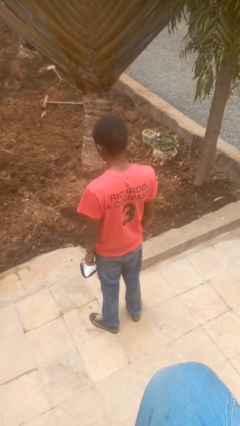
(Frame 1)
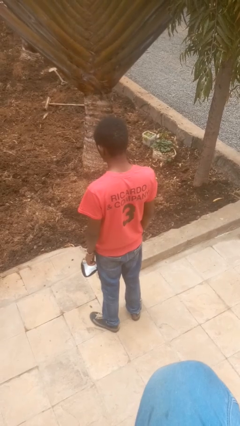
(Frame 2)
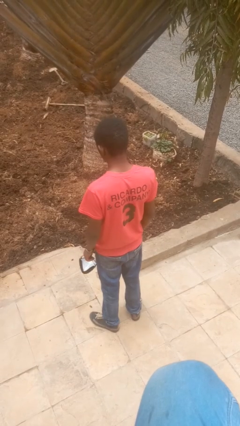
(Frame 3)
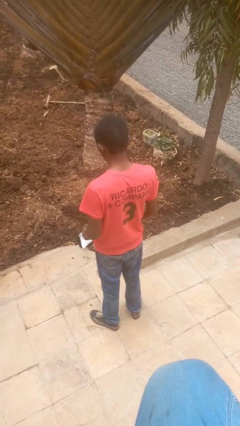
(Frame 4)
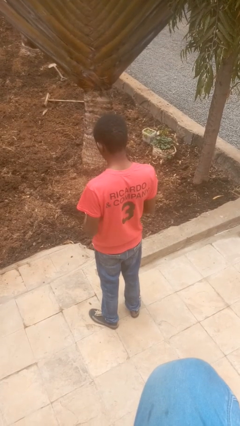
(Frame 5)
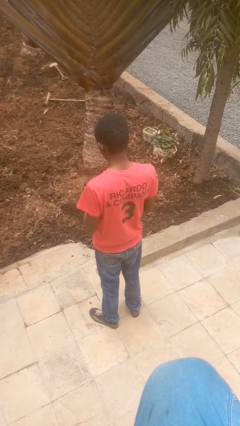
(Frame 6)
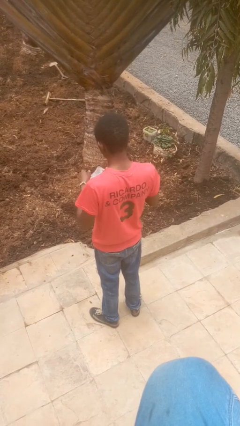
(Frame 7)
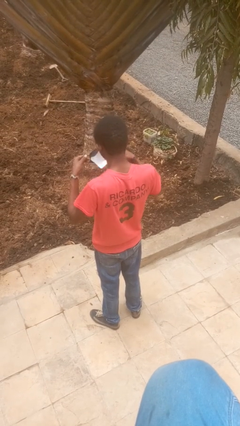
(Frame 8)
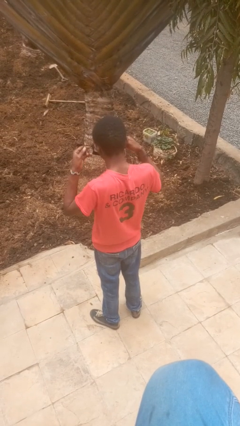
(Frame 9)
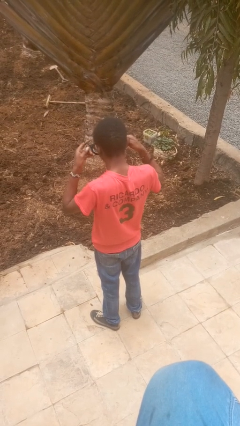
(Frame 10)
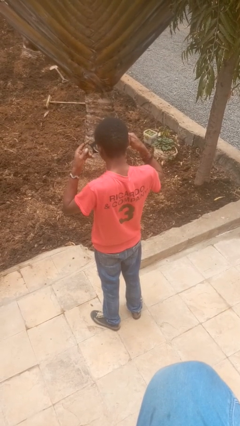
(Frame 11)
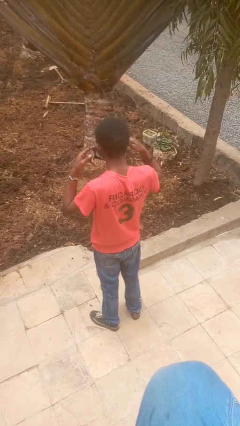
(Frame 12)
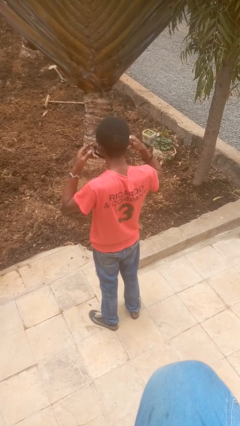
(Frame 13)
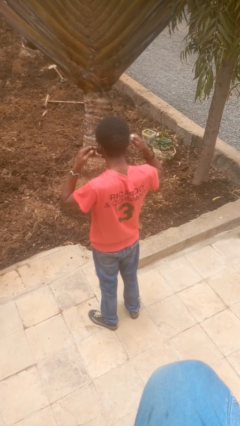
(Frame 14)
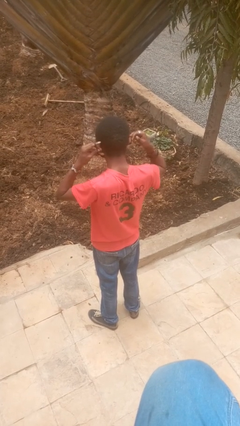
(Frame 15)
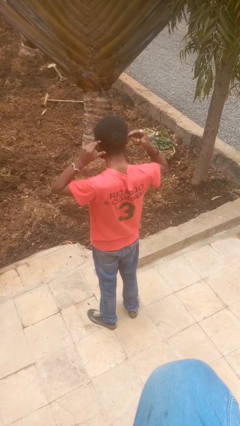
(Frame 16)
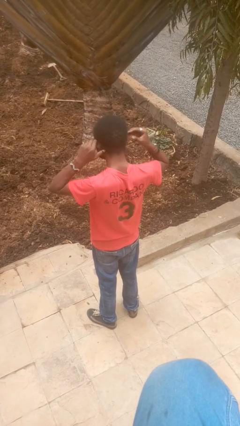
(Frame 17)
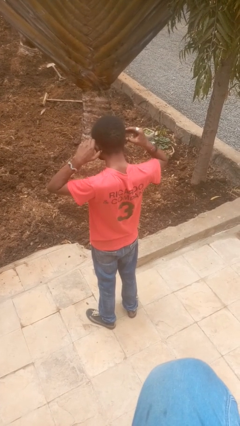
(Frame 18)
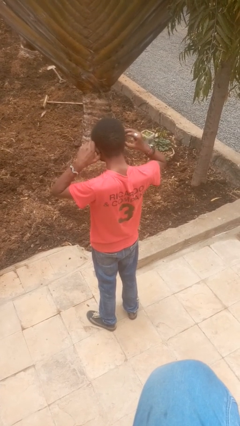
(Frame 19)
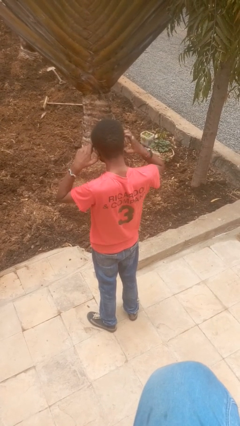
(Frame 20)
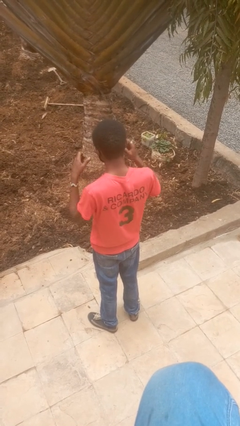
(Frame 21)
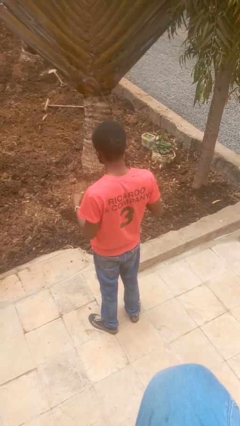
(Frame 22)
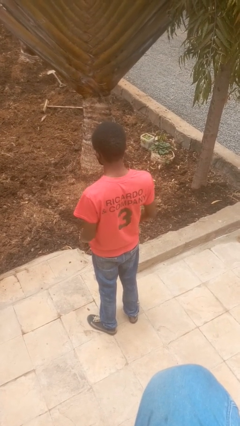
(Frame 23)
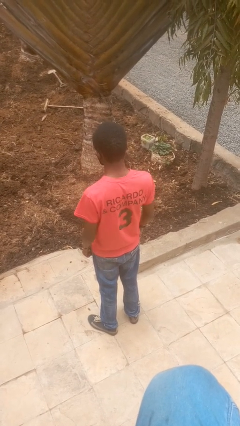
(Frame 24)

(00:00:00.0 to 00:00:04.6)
person puts on facemask

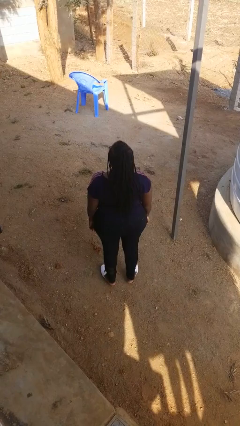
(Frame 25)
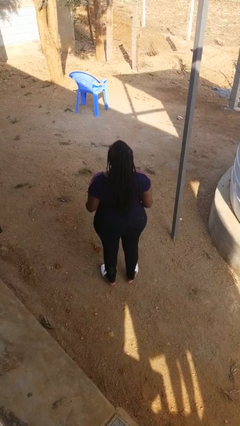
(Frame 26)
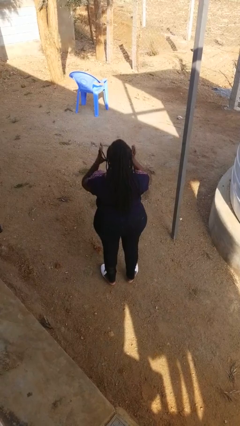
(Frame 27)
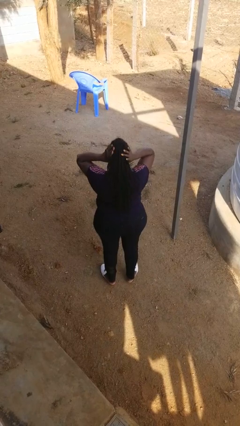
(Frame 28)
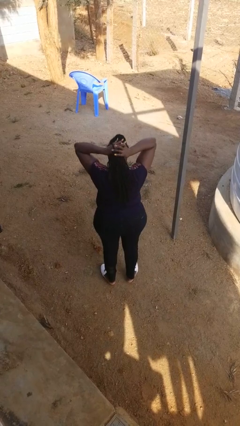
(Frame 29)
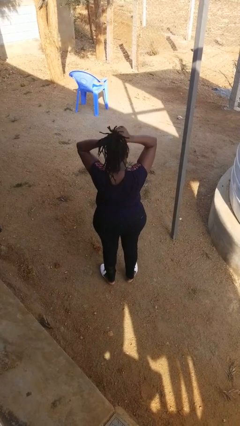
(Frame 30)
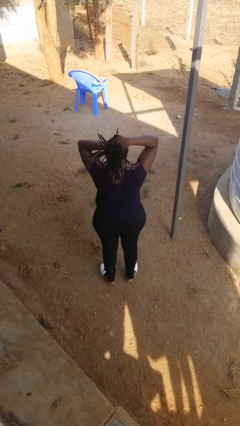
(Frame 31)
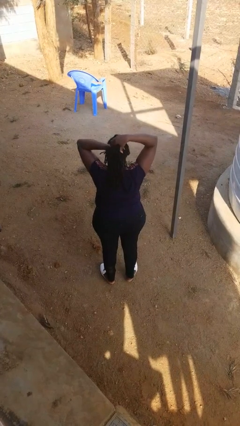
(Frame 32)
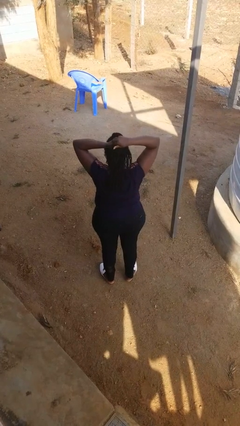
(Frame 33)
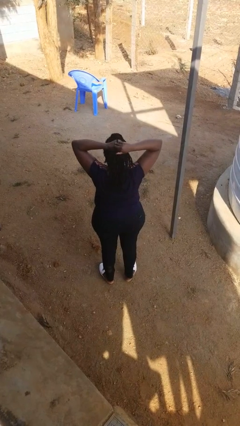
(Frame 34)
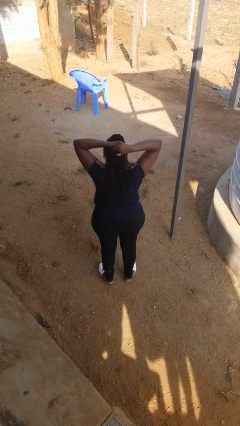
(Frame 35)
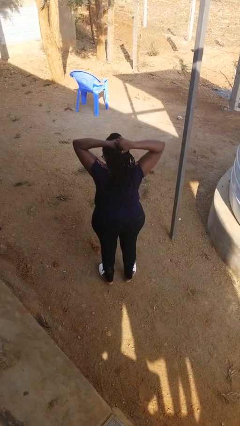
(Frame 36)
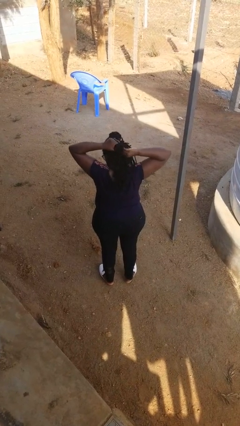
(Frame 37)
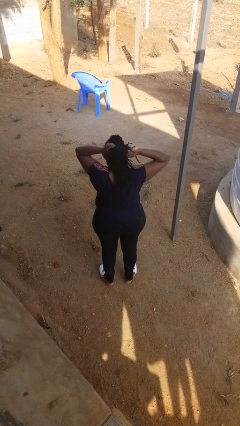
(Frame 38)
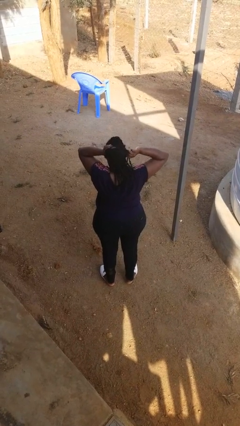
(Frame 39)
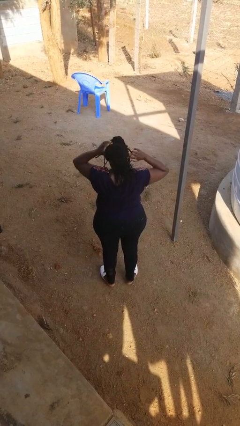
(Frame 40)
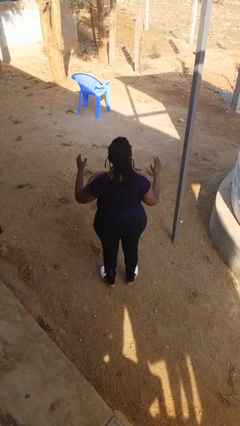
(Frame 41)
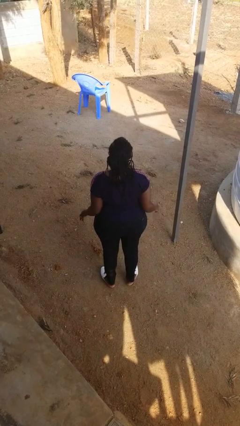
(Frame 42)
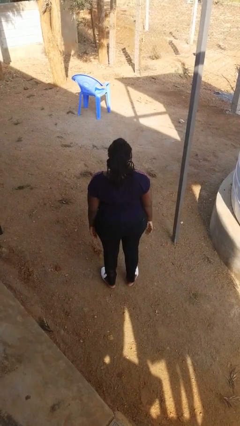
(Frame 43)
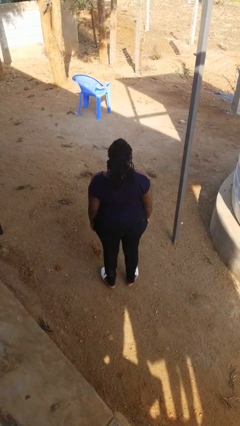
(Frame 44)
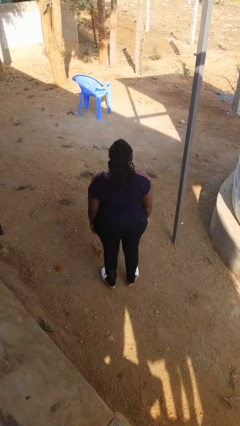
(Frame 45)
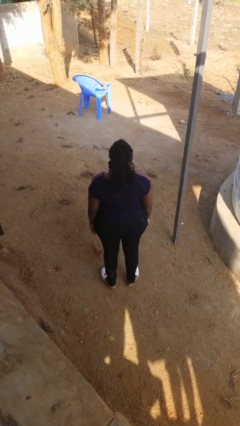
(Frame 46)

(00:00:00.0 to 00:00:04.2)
person puts hair in ponytail

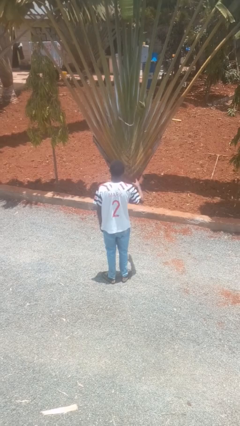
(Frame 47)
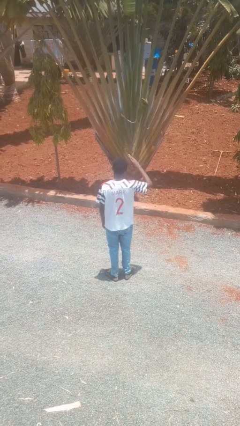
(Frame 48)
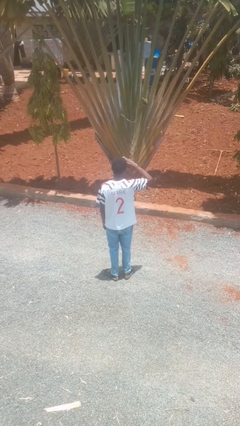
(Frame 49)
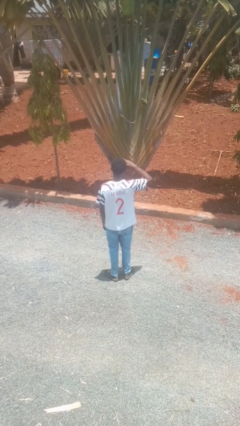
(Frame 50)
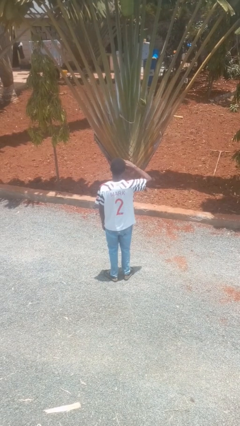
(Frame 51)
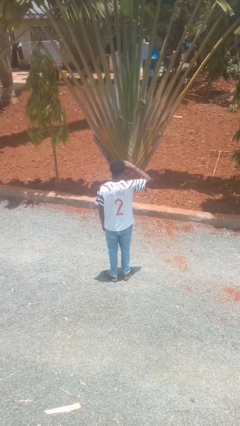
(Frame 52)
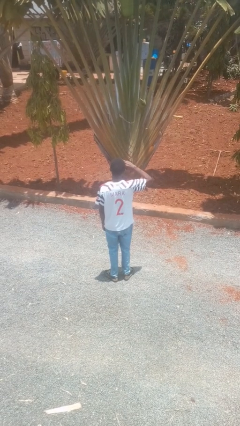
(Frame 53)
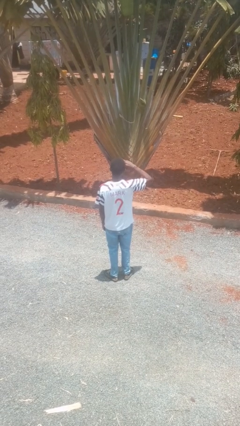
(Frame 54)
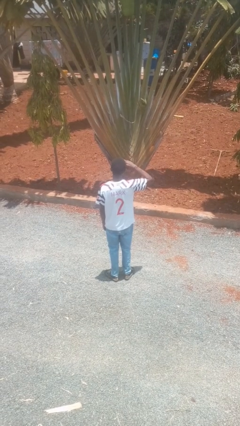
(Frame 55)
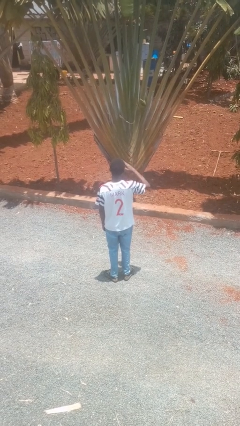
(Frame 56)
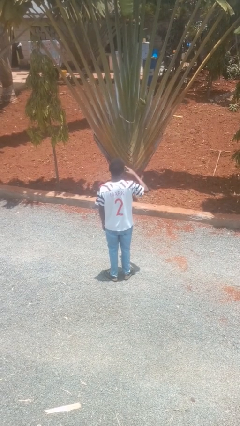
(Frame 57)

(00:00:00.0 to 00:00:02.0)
person salutes

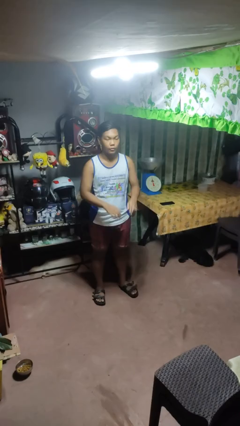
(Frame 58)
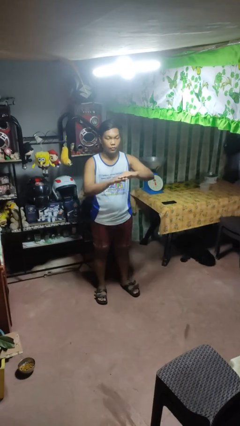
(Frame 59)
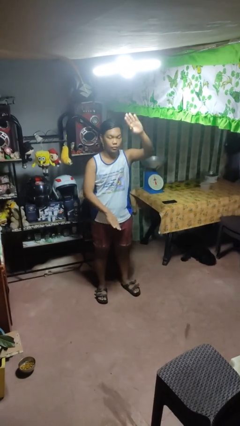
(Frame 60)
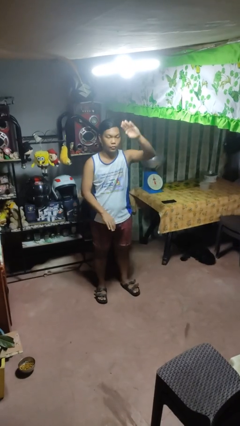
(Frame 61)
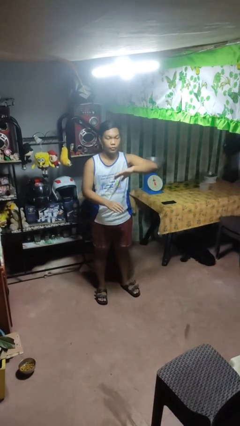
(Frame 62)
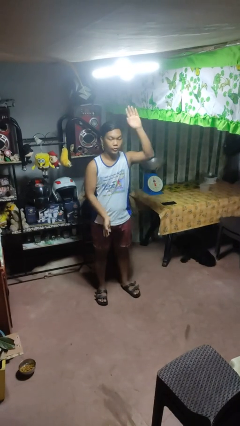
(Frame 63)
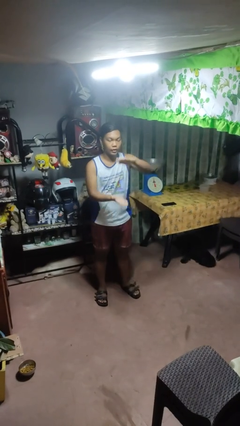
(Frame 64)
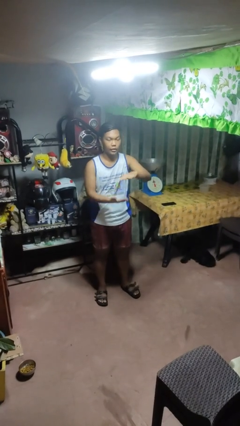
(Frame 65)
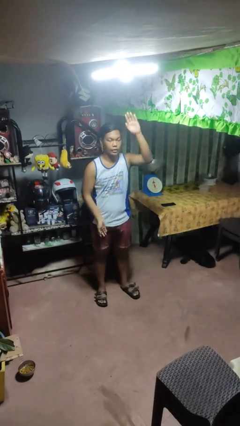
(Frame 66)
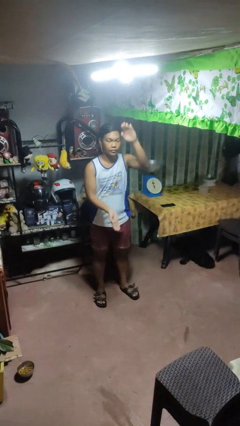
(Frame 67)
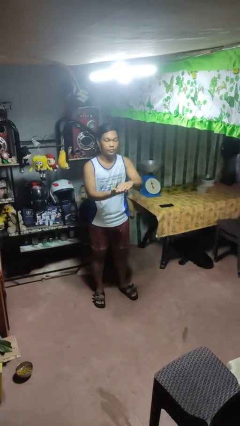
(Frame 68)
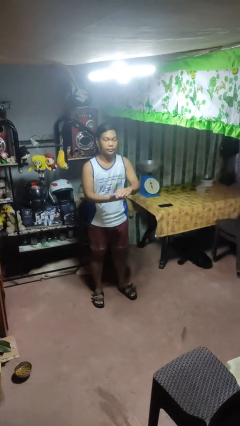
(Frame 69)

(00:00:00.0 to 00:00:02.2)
person gestures zoom out

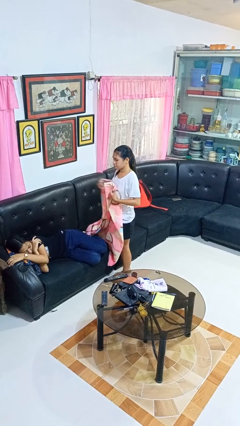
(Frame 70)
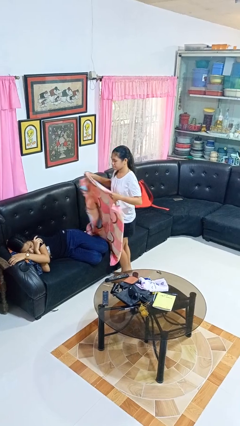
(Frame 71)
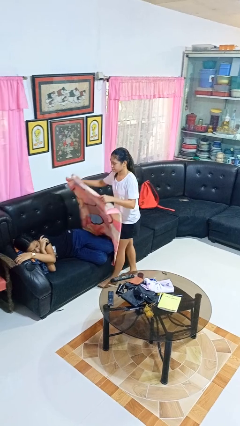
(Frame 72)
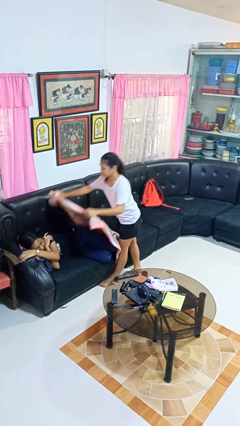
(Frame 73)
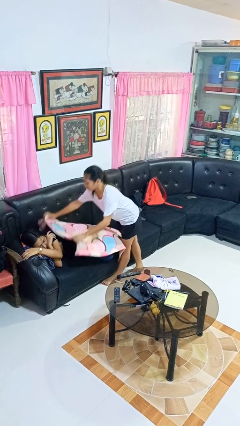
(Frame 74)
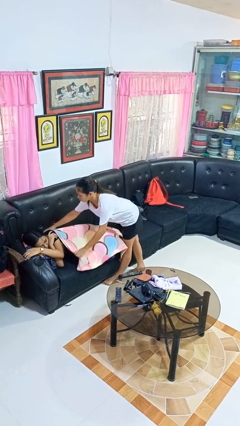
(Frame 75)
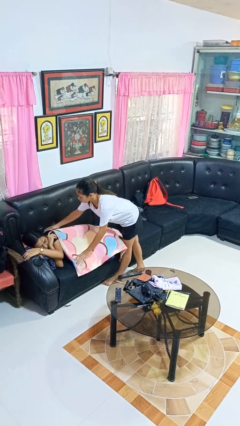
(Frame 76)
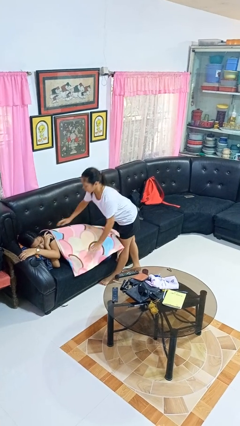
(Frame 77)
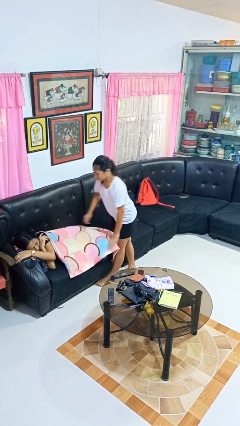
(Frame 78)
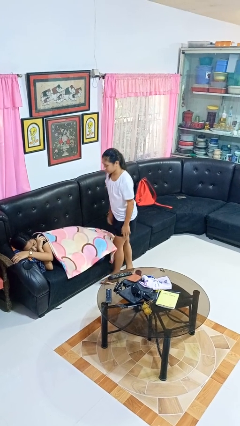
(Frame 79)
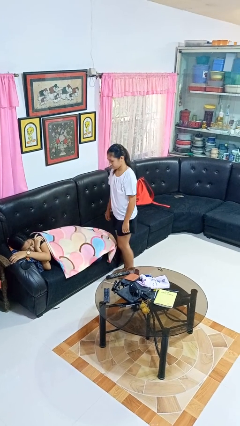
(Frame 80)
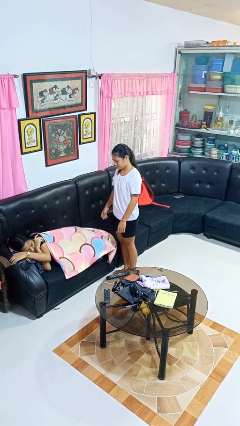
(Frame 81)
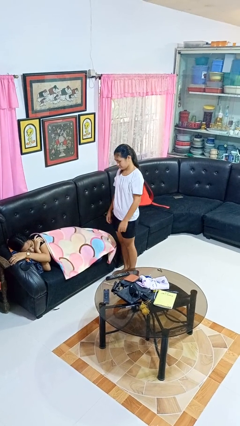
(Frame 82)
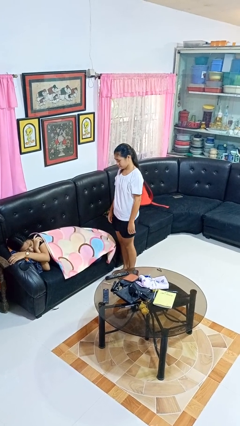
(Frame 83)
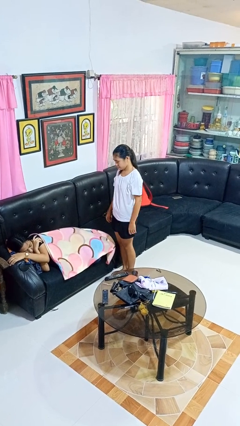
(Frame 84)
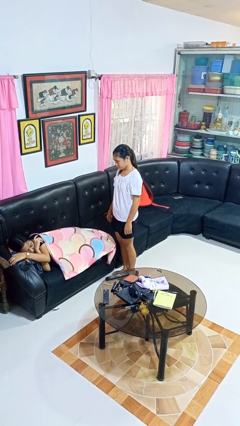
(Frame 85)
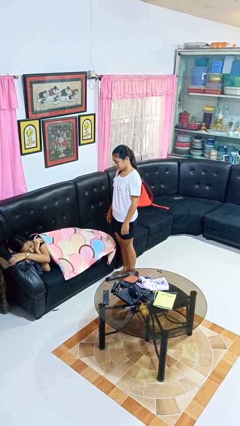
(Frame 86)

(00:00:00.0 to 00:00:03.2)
person covers friend with blanket

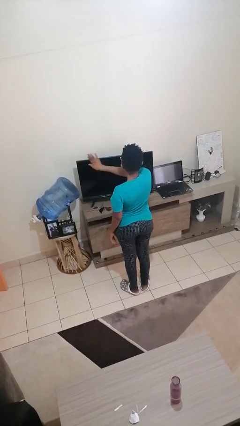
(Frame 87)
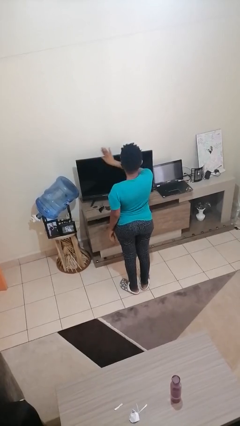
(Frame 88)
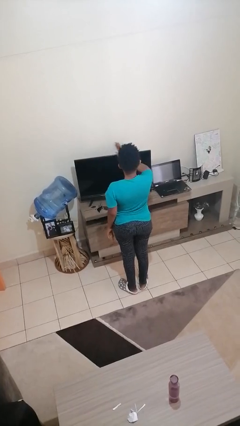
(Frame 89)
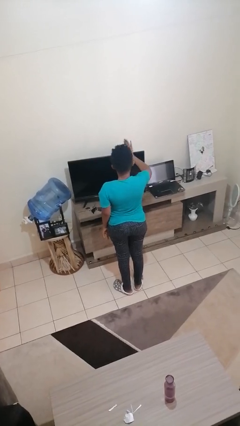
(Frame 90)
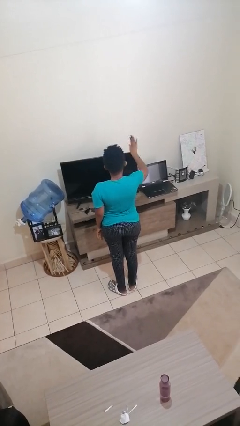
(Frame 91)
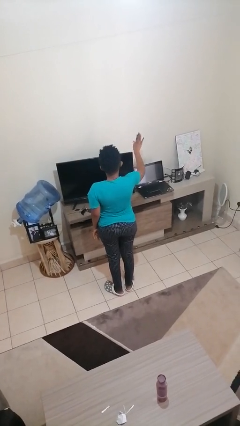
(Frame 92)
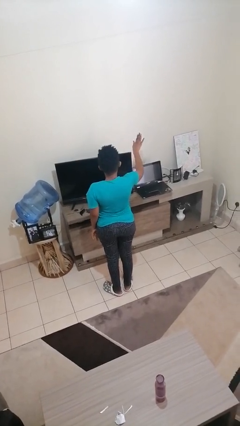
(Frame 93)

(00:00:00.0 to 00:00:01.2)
person gestures swipe right
